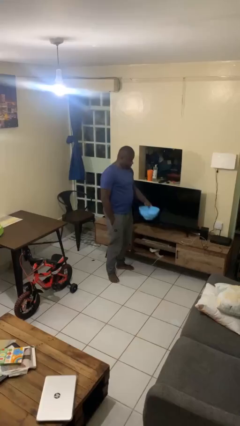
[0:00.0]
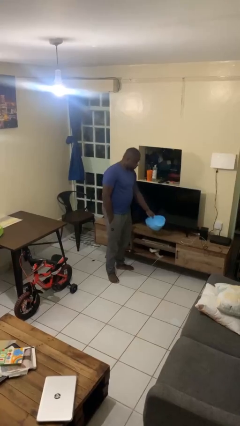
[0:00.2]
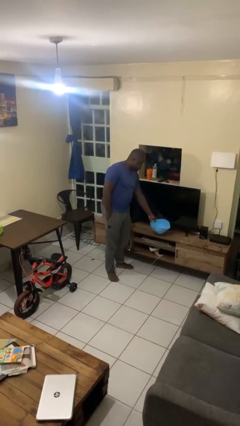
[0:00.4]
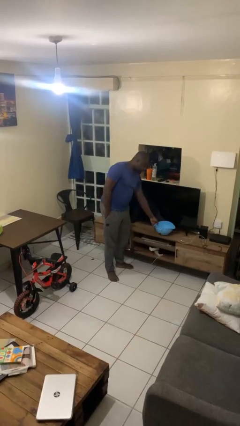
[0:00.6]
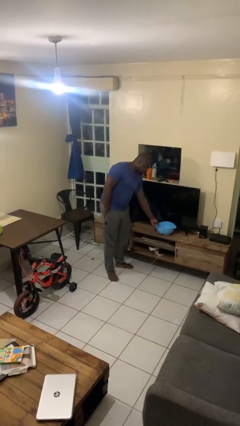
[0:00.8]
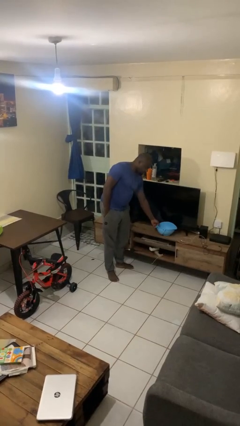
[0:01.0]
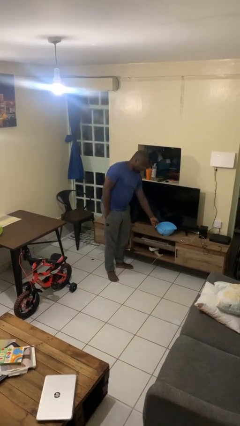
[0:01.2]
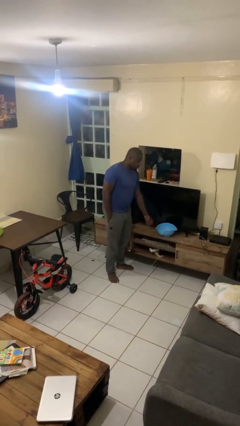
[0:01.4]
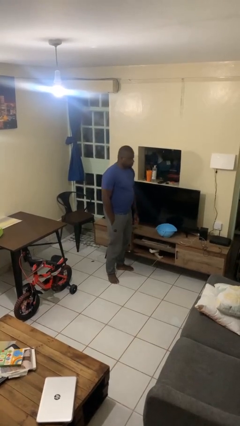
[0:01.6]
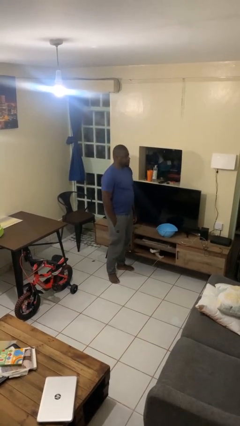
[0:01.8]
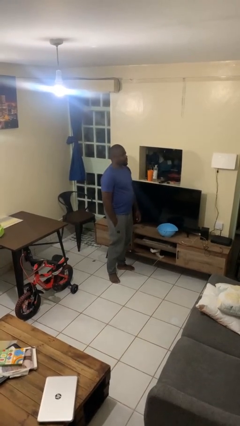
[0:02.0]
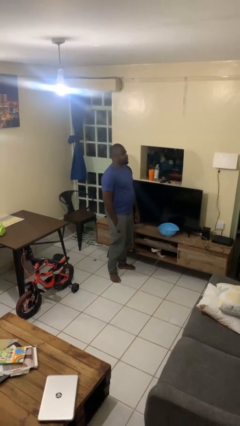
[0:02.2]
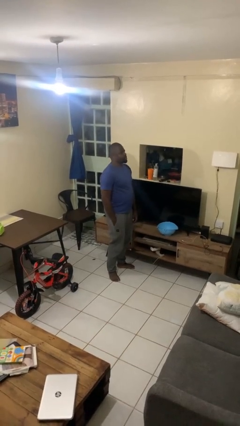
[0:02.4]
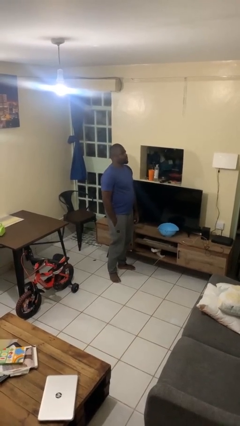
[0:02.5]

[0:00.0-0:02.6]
person puts down object on countertop

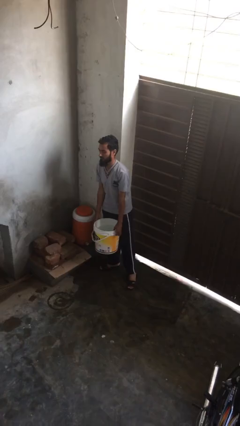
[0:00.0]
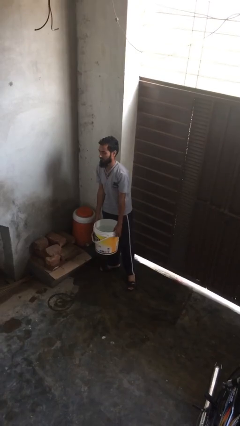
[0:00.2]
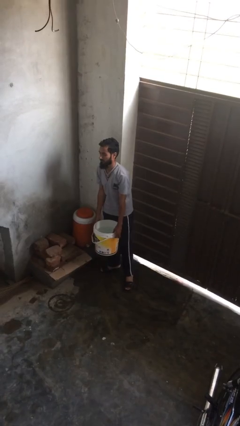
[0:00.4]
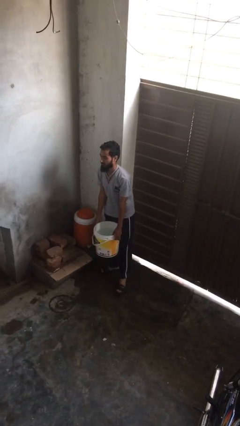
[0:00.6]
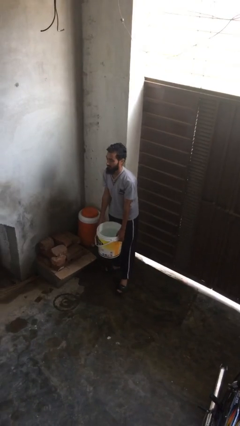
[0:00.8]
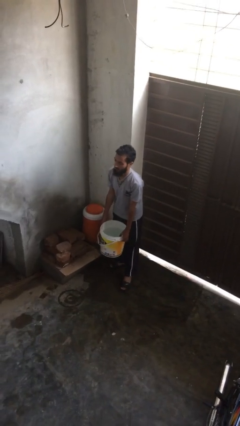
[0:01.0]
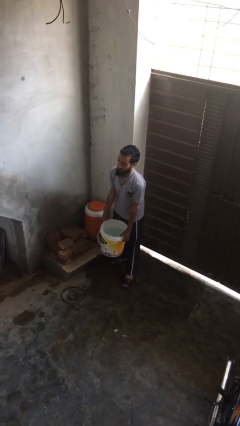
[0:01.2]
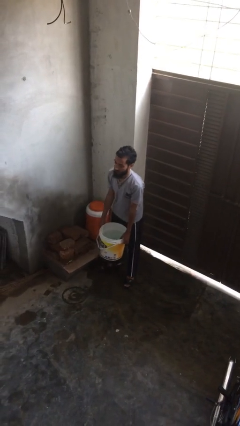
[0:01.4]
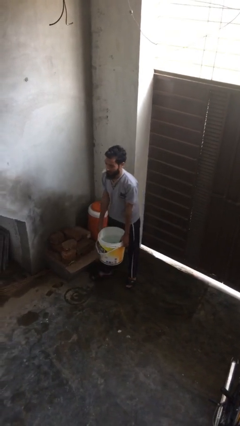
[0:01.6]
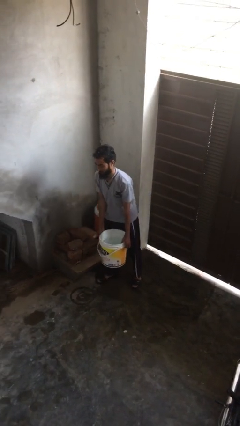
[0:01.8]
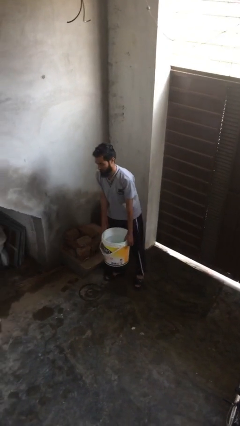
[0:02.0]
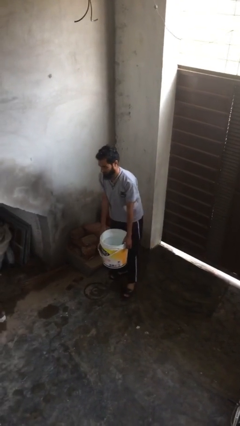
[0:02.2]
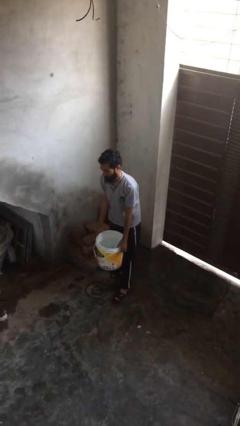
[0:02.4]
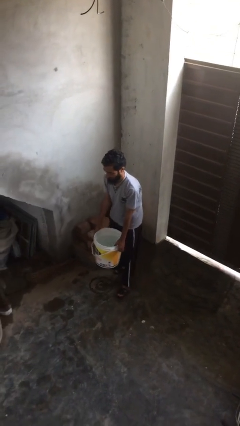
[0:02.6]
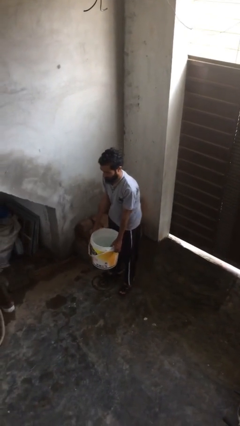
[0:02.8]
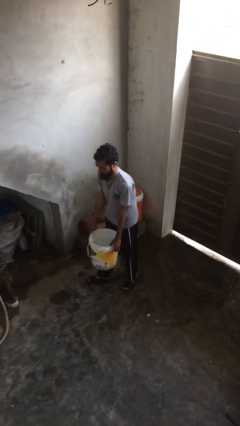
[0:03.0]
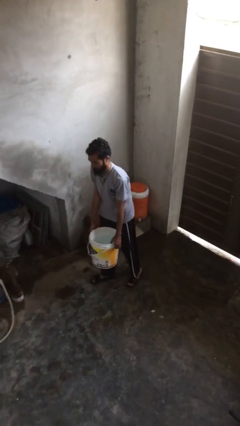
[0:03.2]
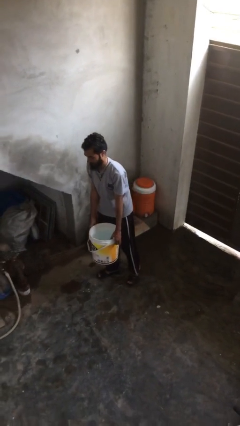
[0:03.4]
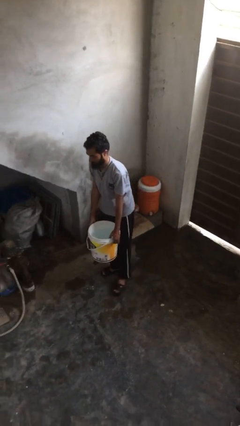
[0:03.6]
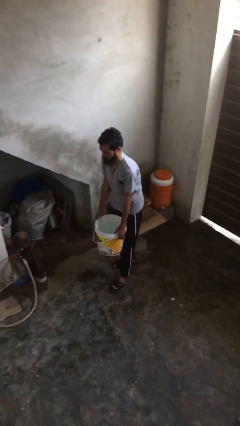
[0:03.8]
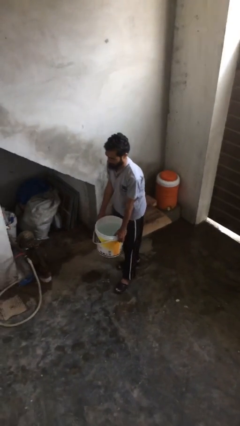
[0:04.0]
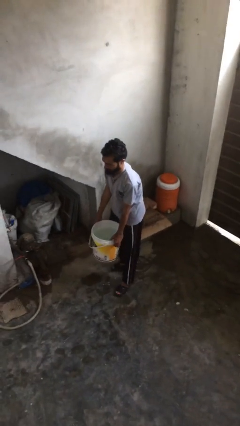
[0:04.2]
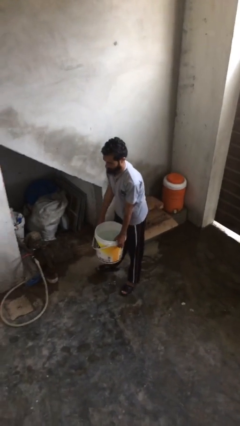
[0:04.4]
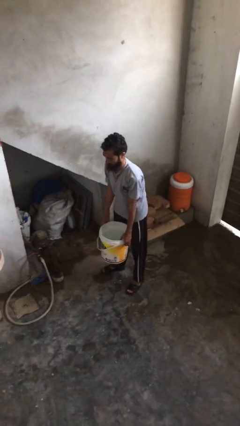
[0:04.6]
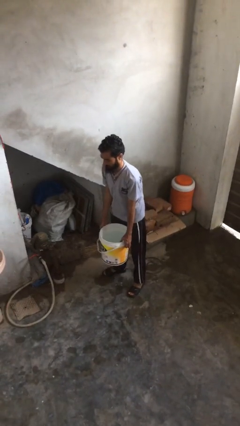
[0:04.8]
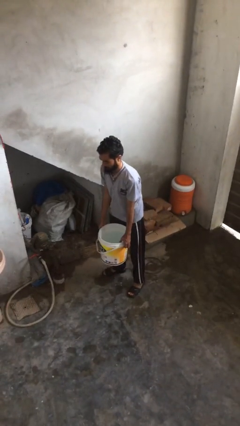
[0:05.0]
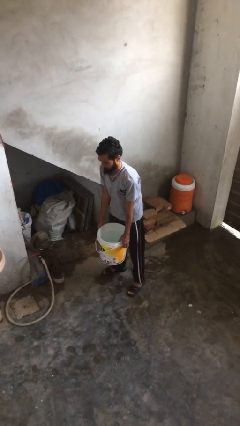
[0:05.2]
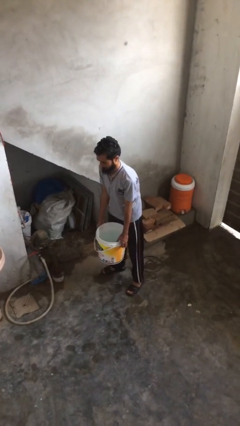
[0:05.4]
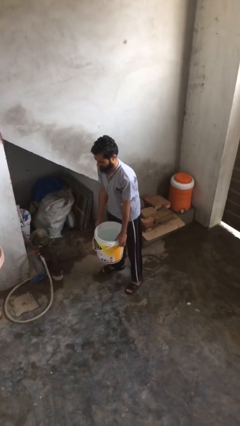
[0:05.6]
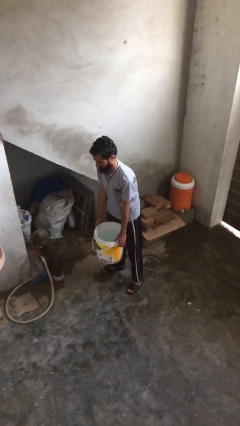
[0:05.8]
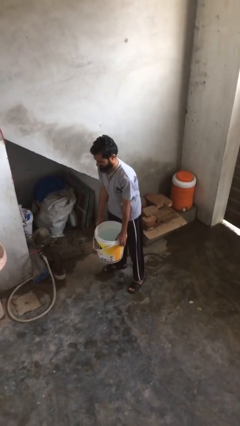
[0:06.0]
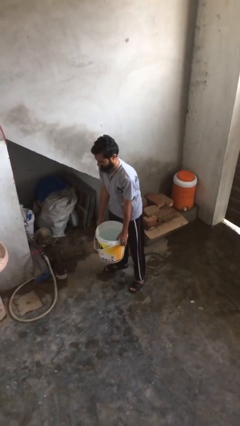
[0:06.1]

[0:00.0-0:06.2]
person carries heavy object

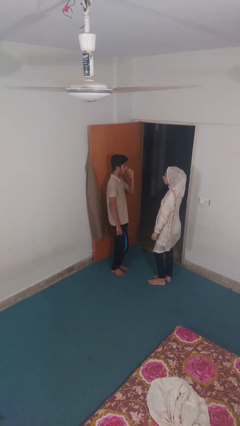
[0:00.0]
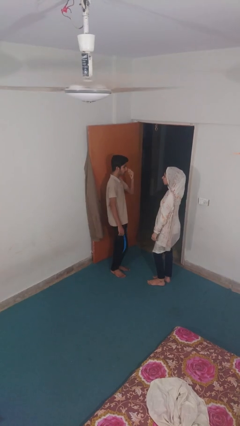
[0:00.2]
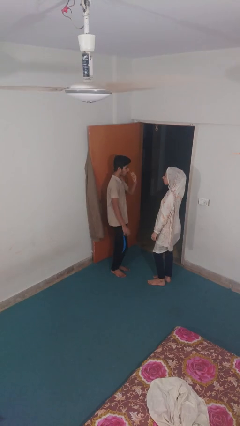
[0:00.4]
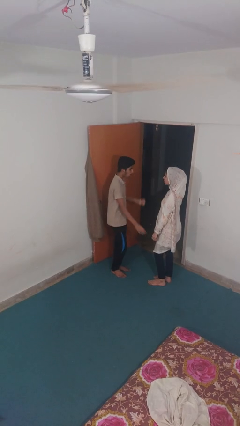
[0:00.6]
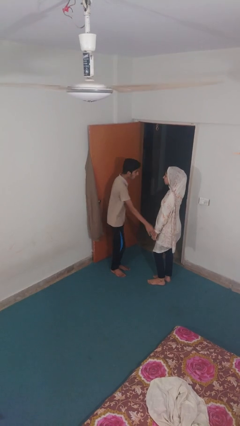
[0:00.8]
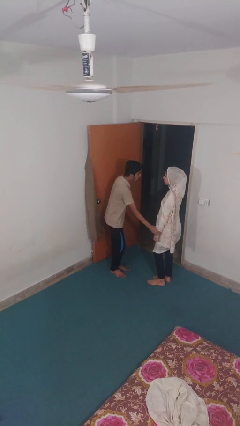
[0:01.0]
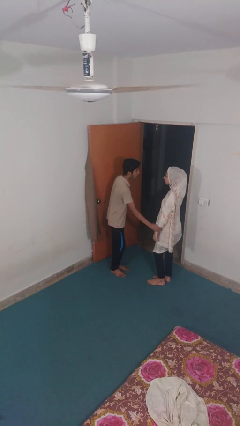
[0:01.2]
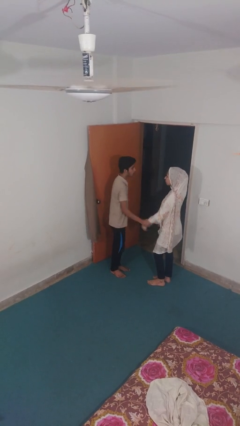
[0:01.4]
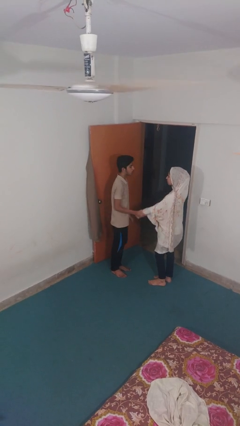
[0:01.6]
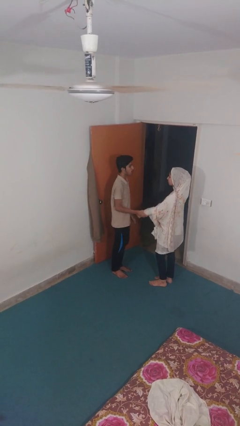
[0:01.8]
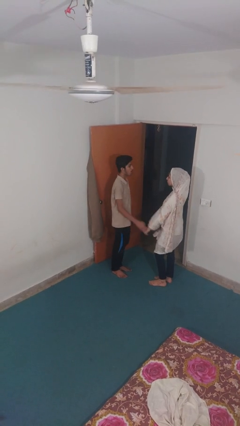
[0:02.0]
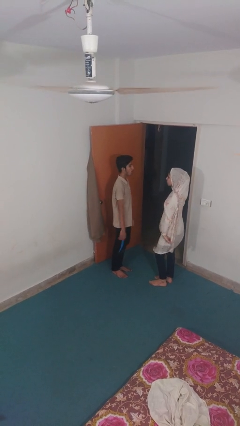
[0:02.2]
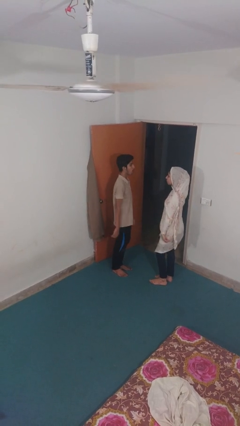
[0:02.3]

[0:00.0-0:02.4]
person grabs person by forearm

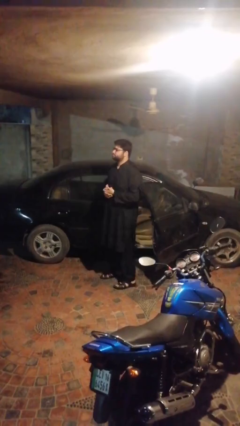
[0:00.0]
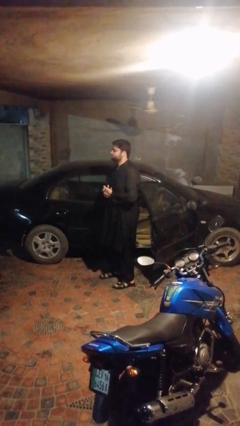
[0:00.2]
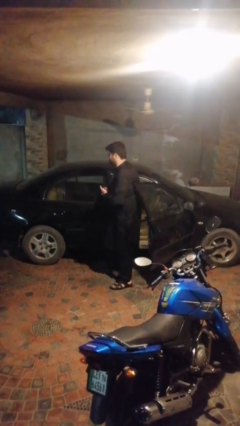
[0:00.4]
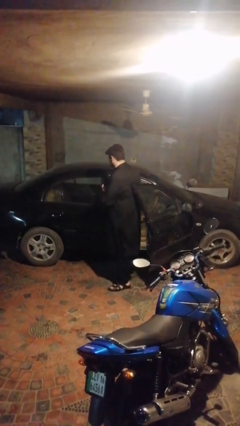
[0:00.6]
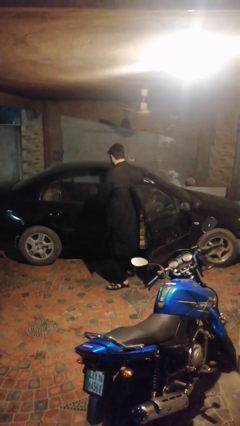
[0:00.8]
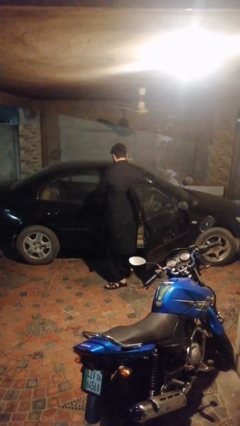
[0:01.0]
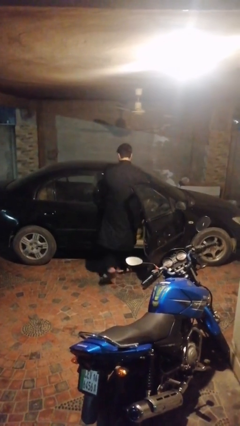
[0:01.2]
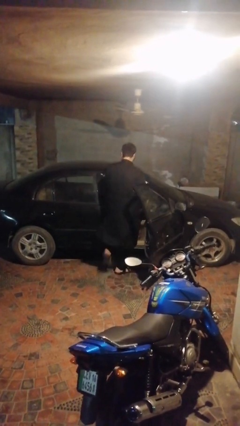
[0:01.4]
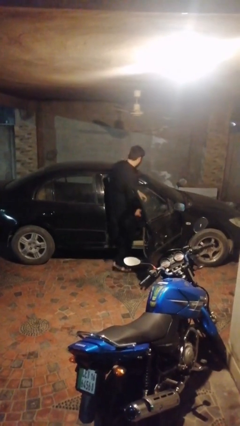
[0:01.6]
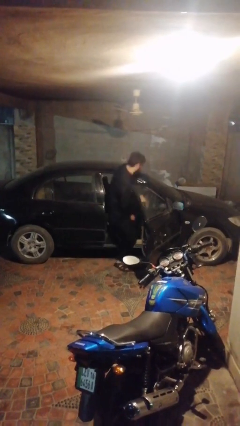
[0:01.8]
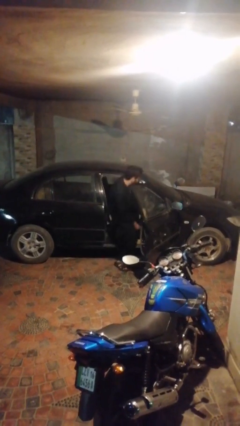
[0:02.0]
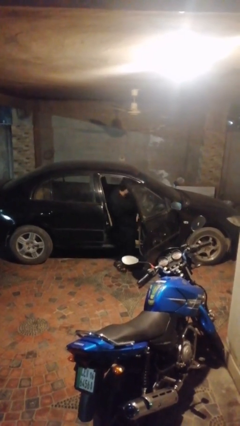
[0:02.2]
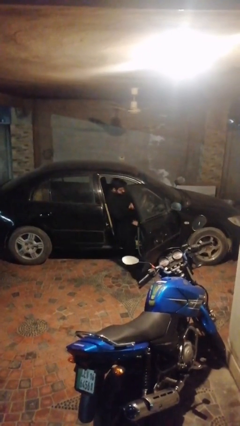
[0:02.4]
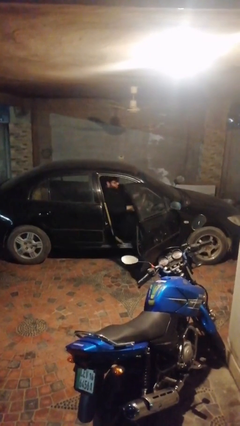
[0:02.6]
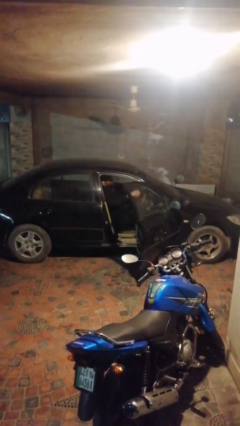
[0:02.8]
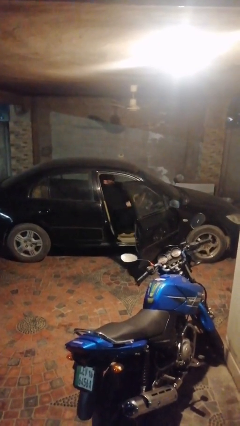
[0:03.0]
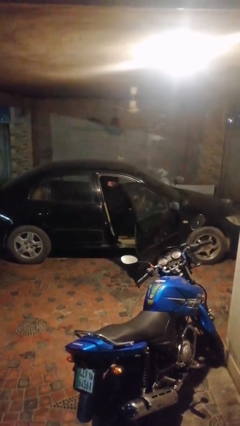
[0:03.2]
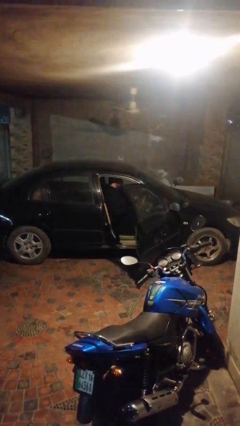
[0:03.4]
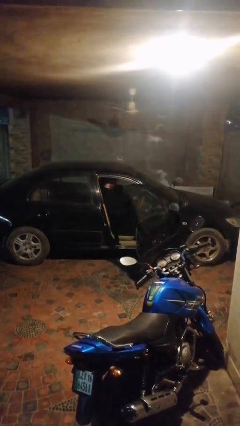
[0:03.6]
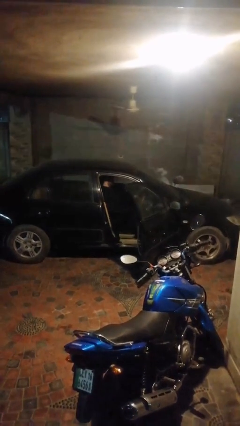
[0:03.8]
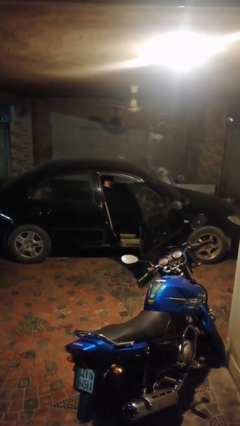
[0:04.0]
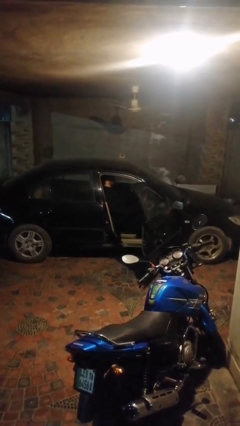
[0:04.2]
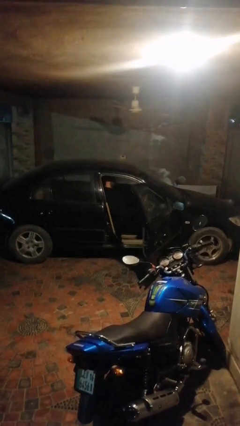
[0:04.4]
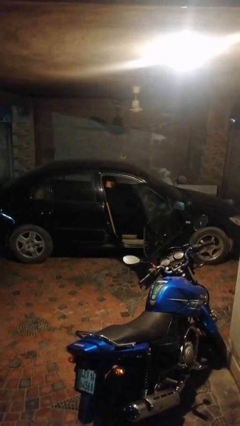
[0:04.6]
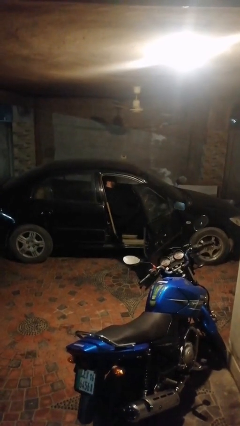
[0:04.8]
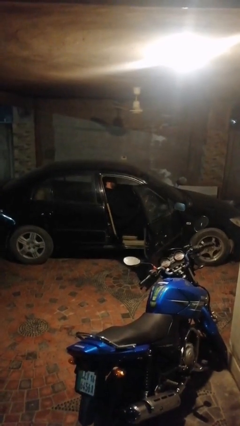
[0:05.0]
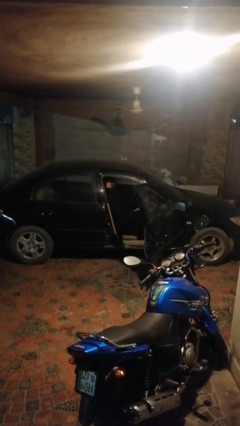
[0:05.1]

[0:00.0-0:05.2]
person enters car

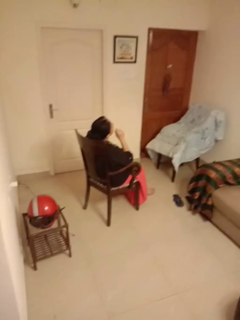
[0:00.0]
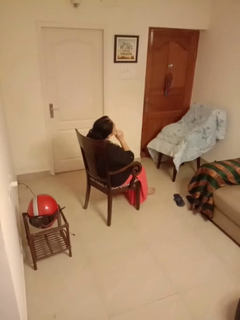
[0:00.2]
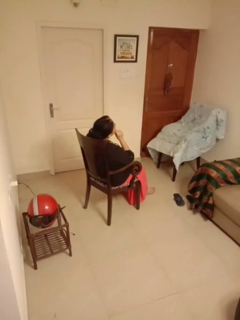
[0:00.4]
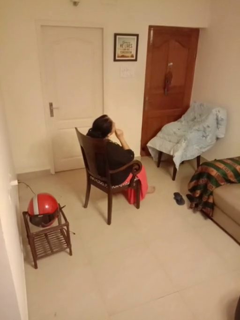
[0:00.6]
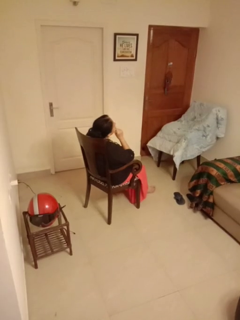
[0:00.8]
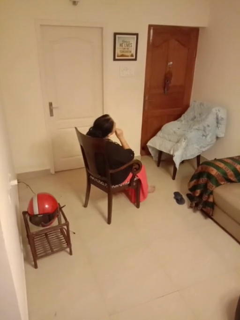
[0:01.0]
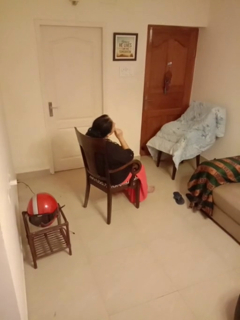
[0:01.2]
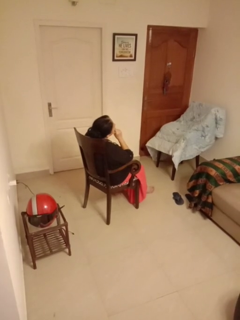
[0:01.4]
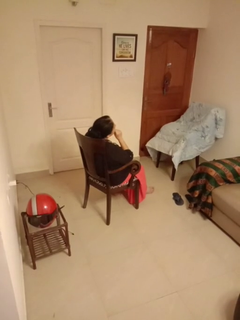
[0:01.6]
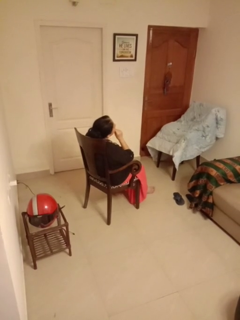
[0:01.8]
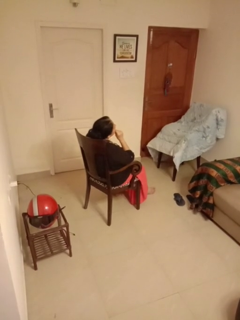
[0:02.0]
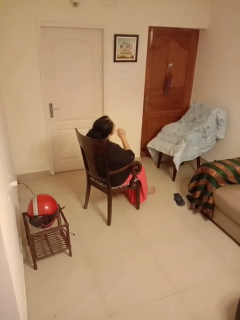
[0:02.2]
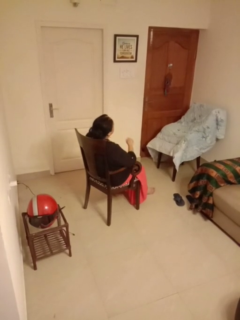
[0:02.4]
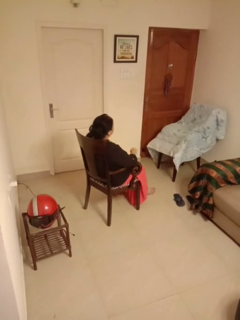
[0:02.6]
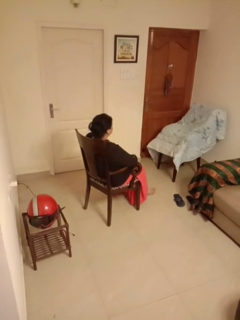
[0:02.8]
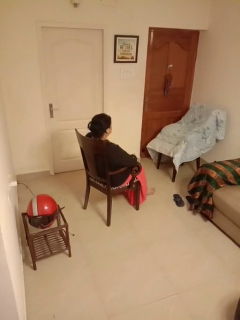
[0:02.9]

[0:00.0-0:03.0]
person strokes chin
